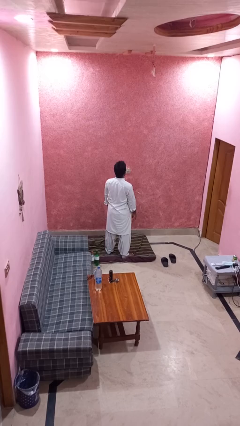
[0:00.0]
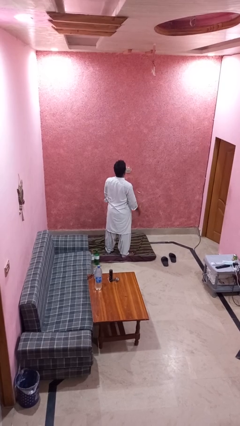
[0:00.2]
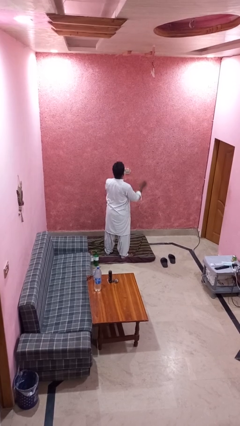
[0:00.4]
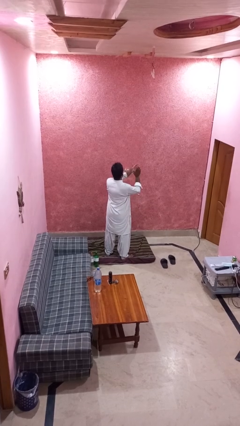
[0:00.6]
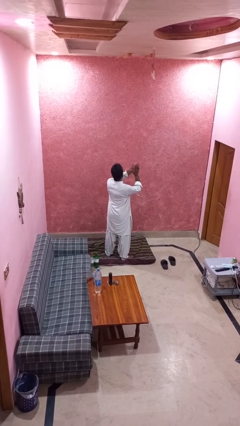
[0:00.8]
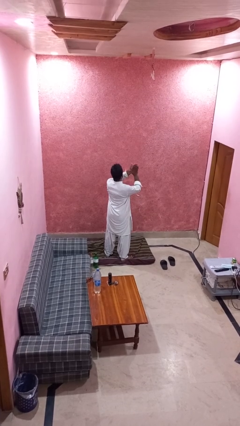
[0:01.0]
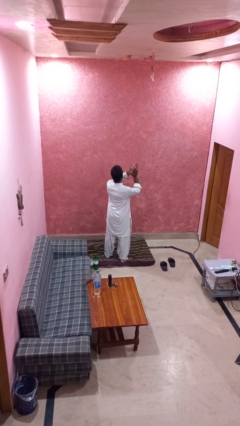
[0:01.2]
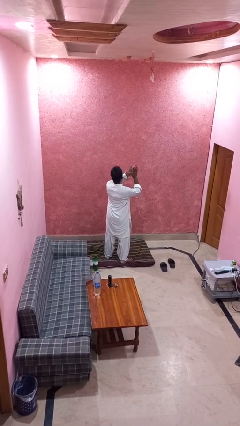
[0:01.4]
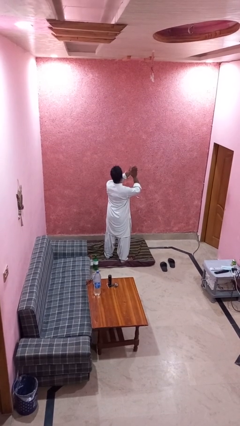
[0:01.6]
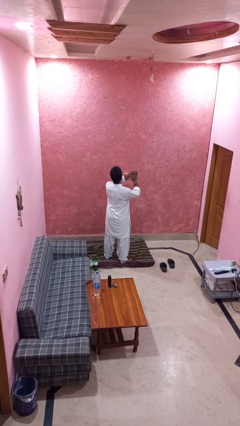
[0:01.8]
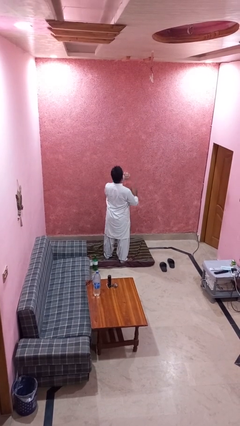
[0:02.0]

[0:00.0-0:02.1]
person claps hands

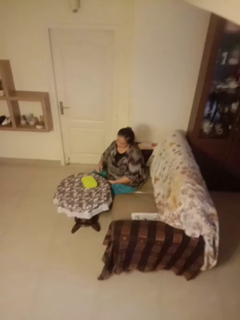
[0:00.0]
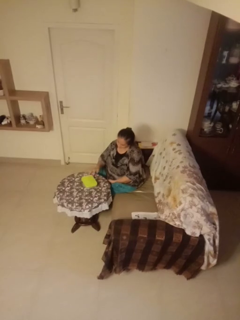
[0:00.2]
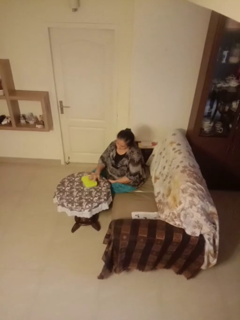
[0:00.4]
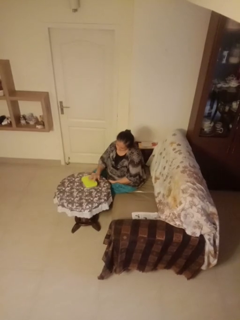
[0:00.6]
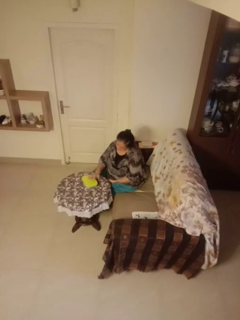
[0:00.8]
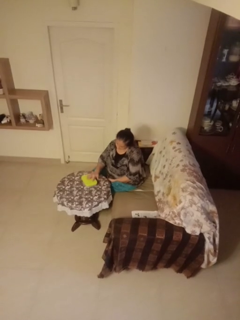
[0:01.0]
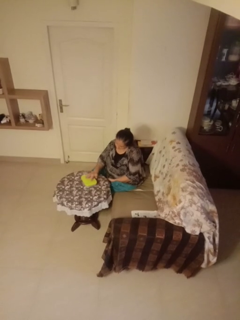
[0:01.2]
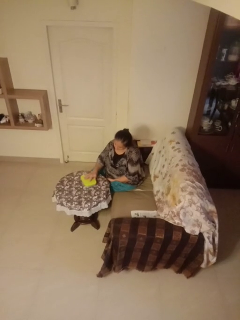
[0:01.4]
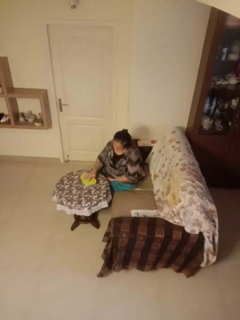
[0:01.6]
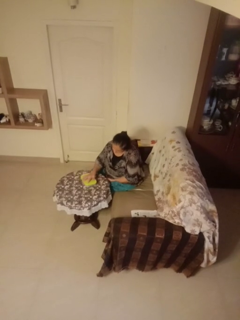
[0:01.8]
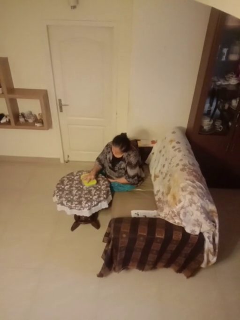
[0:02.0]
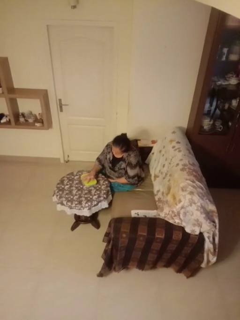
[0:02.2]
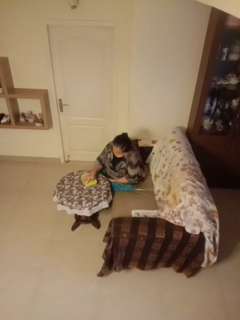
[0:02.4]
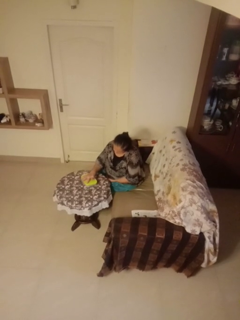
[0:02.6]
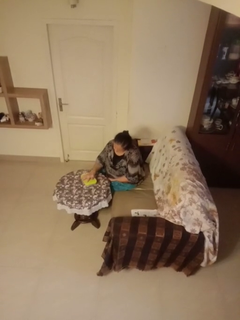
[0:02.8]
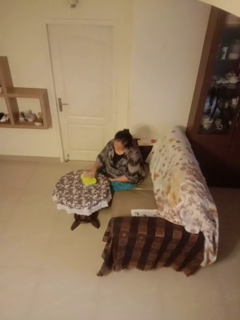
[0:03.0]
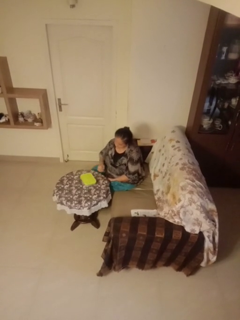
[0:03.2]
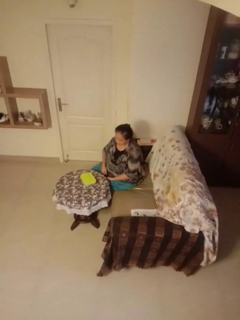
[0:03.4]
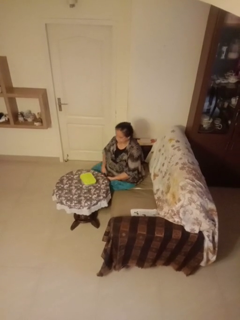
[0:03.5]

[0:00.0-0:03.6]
person taps object with finger

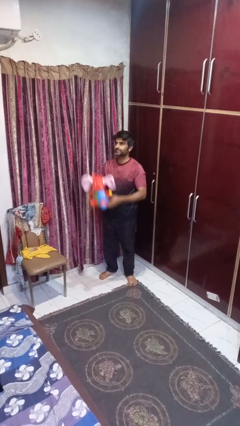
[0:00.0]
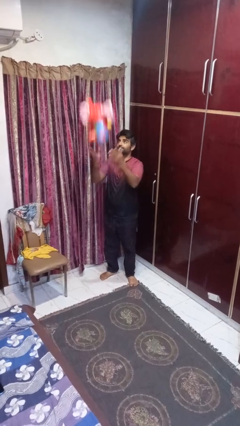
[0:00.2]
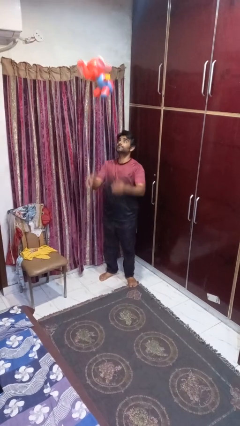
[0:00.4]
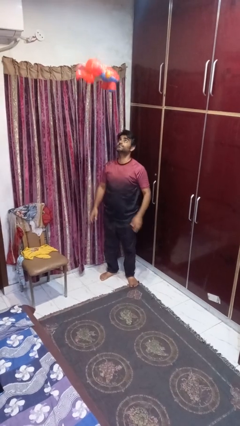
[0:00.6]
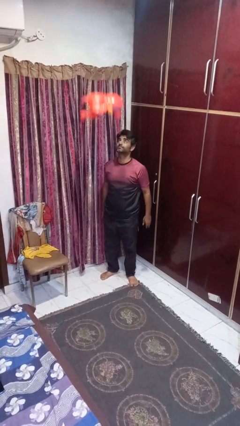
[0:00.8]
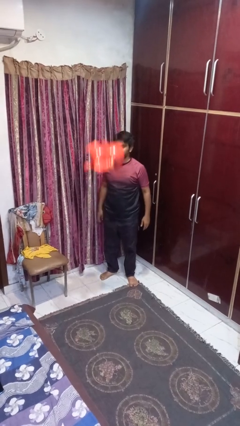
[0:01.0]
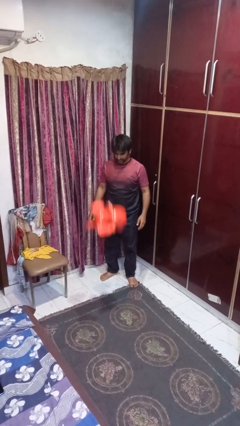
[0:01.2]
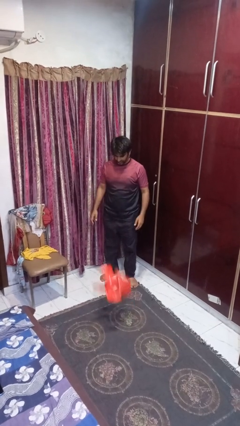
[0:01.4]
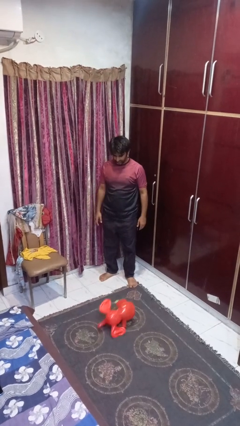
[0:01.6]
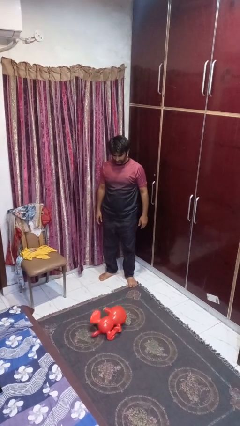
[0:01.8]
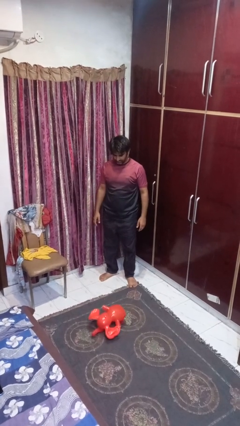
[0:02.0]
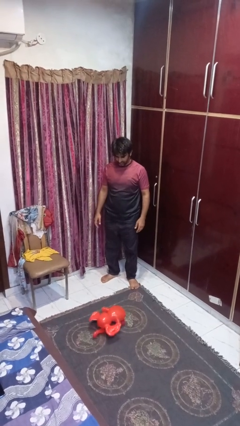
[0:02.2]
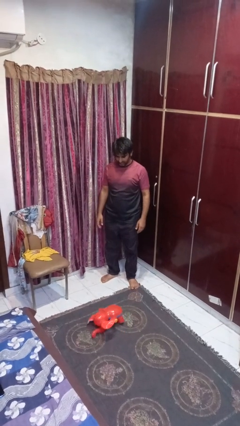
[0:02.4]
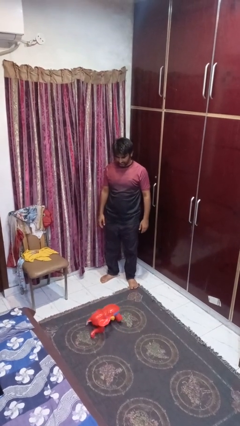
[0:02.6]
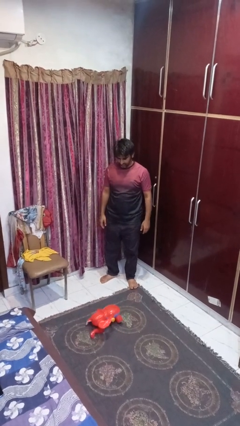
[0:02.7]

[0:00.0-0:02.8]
person throws object into air

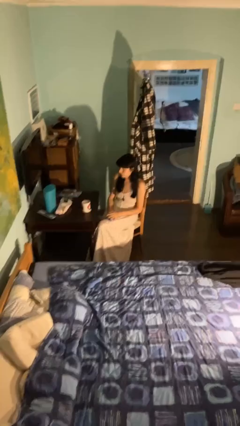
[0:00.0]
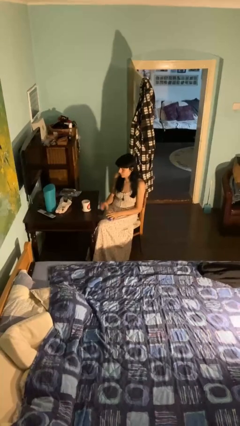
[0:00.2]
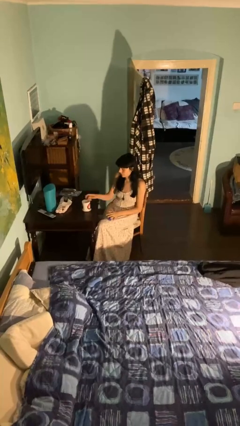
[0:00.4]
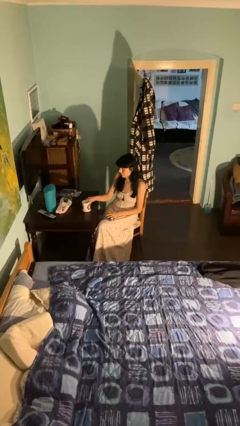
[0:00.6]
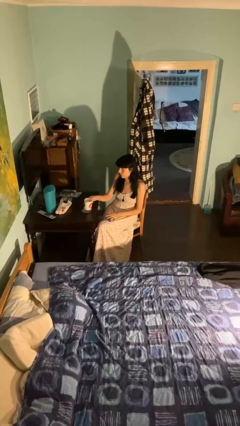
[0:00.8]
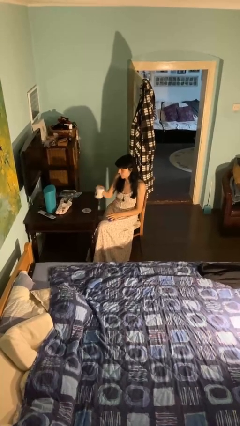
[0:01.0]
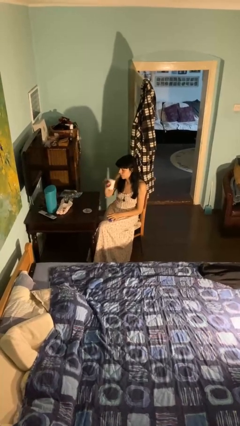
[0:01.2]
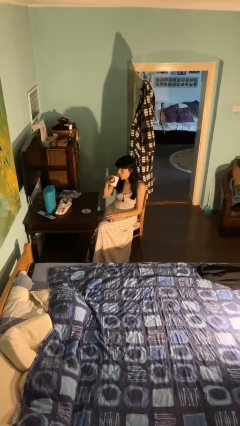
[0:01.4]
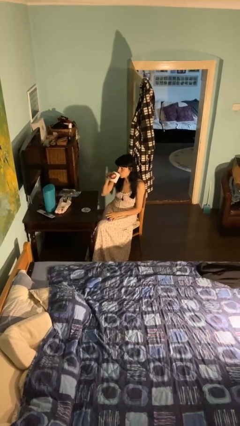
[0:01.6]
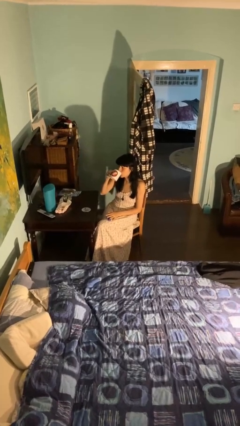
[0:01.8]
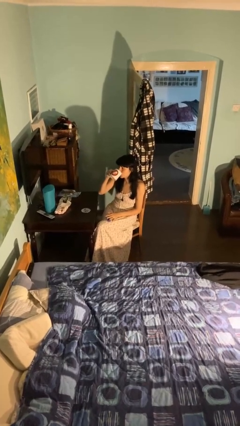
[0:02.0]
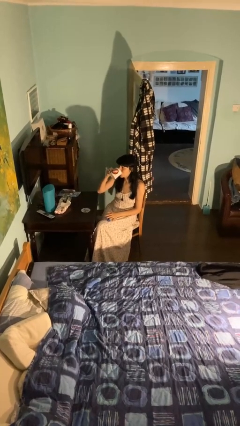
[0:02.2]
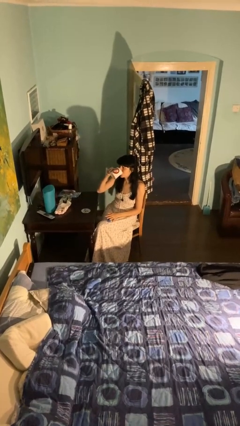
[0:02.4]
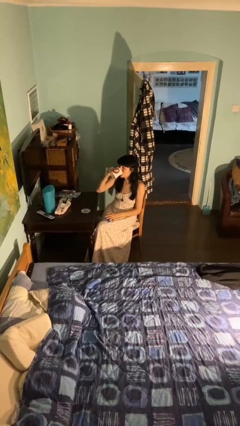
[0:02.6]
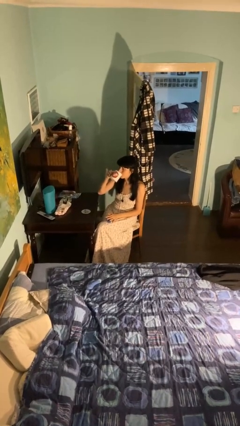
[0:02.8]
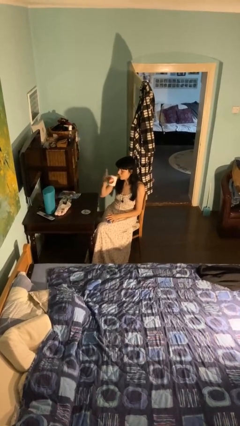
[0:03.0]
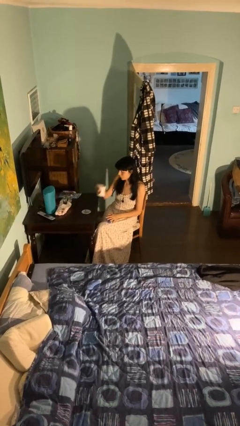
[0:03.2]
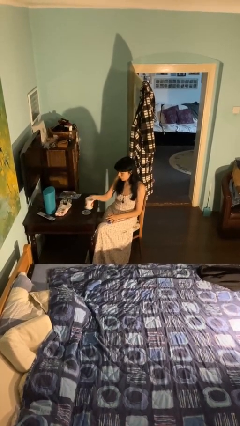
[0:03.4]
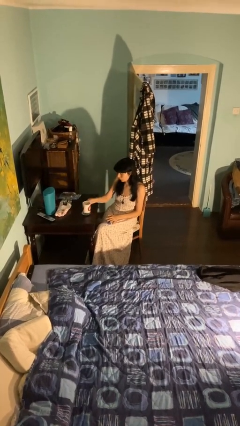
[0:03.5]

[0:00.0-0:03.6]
person drinks from cup

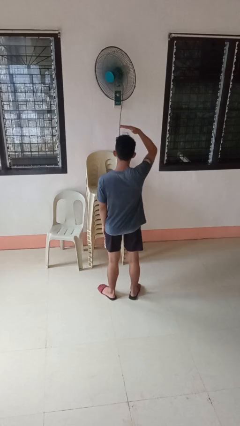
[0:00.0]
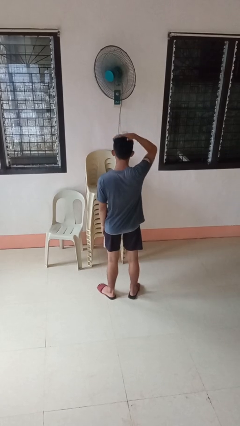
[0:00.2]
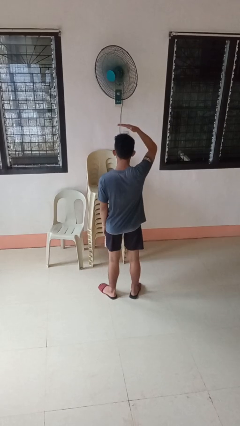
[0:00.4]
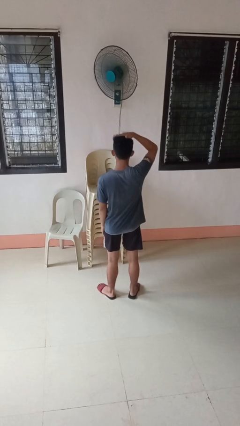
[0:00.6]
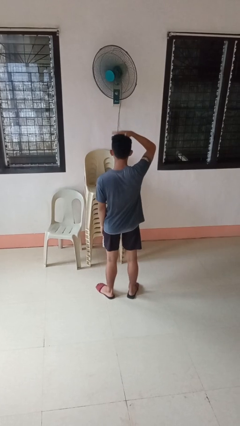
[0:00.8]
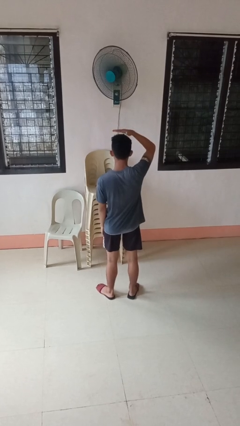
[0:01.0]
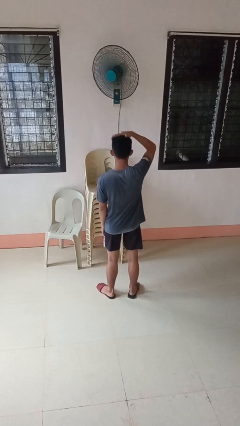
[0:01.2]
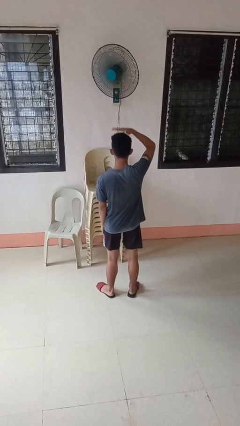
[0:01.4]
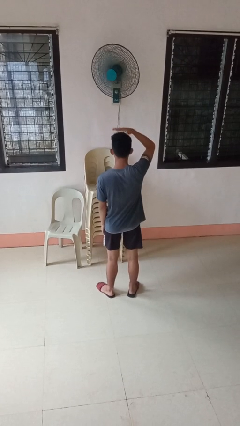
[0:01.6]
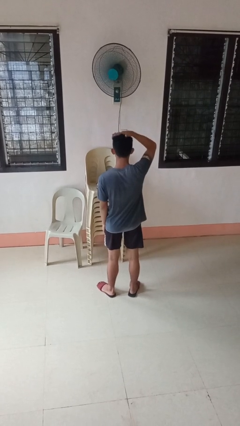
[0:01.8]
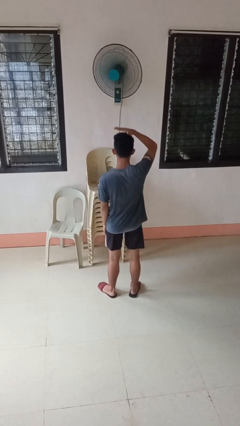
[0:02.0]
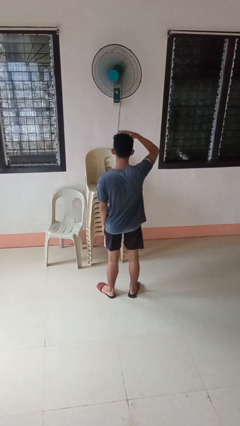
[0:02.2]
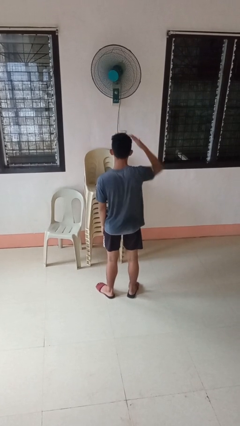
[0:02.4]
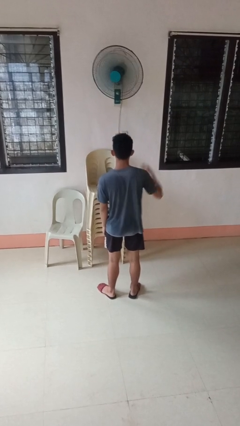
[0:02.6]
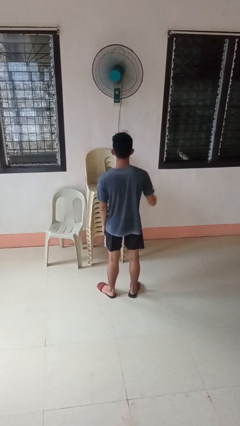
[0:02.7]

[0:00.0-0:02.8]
person pats head

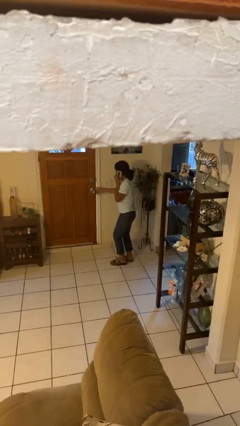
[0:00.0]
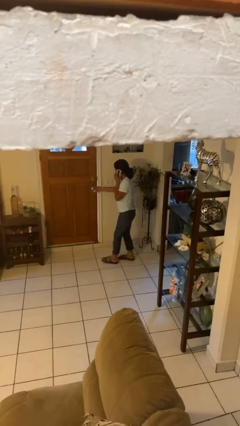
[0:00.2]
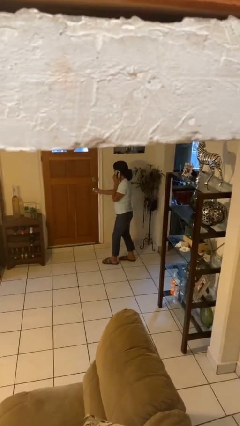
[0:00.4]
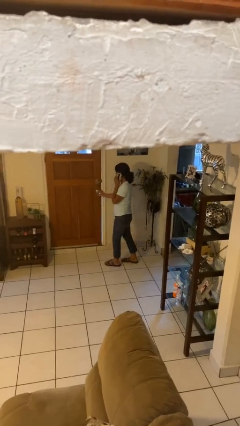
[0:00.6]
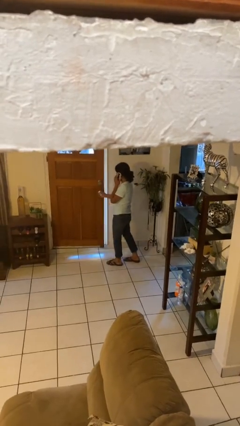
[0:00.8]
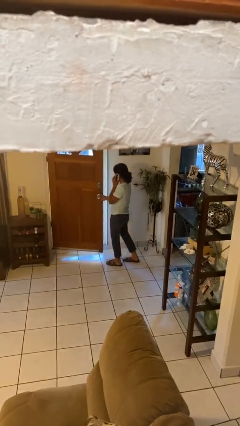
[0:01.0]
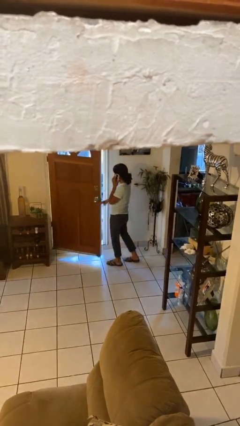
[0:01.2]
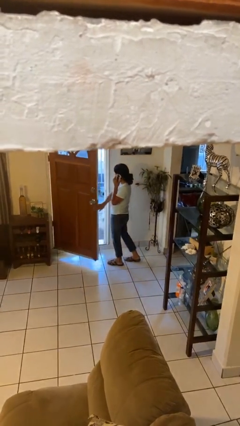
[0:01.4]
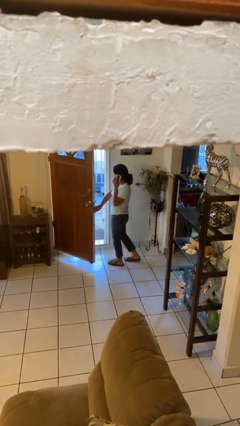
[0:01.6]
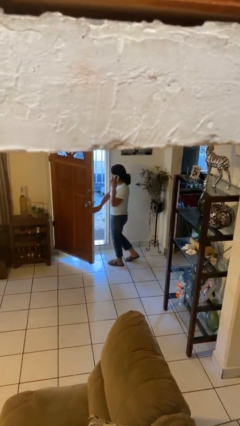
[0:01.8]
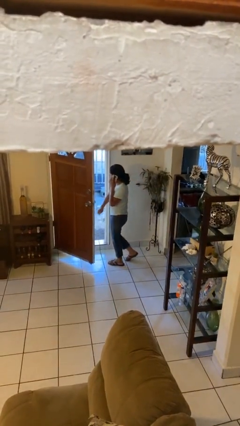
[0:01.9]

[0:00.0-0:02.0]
person opens facility door

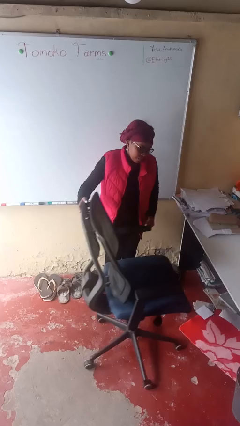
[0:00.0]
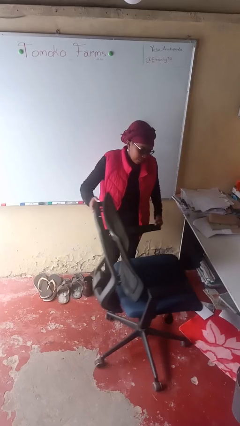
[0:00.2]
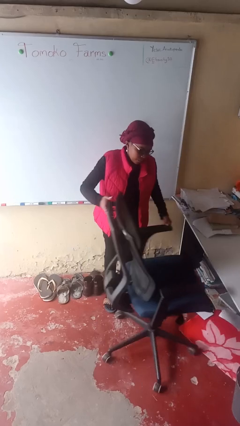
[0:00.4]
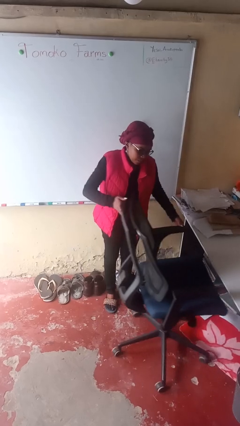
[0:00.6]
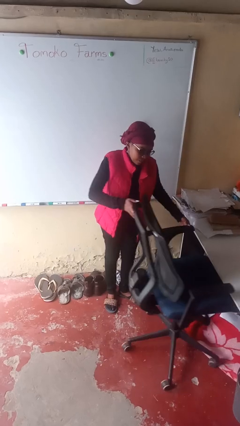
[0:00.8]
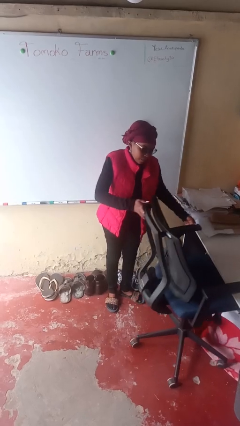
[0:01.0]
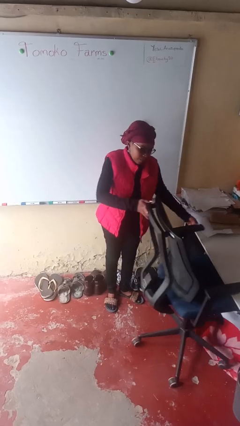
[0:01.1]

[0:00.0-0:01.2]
person pushes in chair

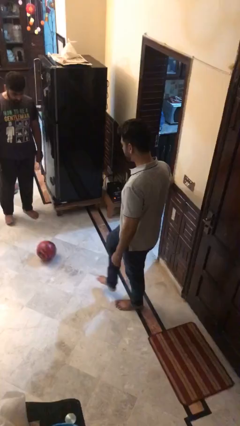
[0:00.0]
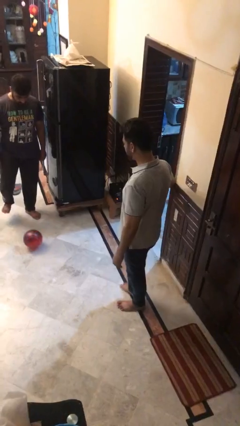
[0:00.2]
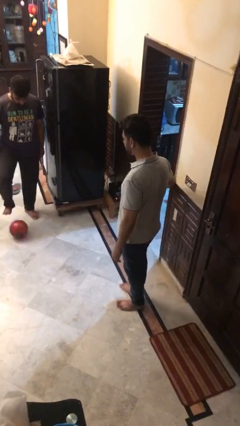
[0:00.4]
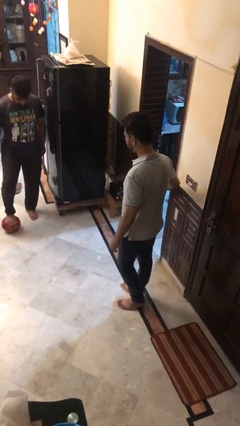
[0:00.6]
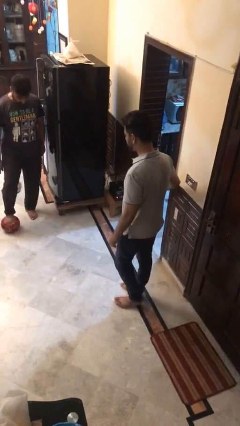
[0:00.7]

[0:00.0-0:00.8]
person kicks object to person
